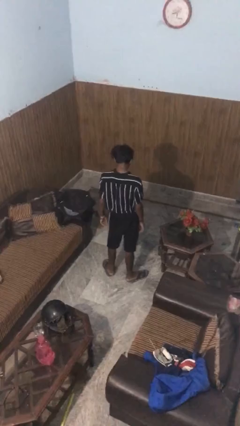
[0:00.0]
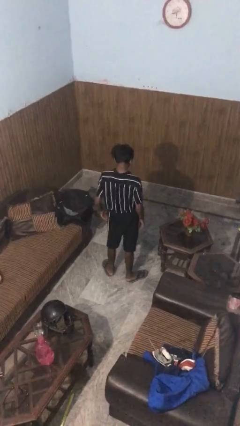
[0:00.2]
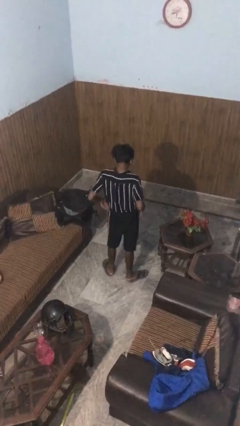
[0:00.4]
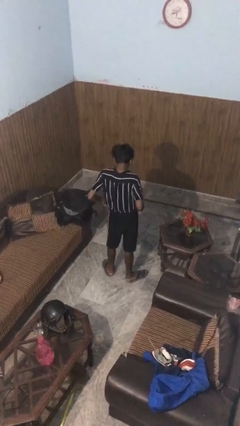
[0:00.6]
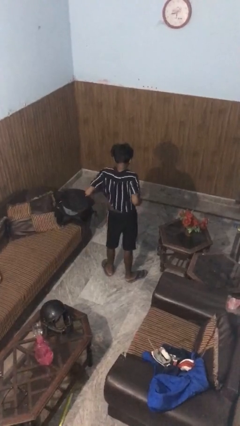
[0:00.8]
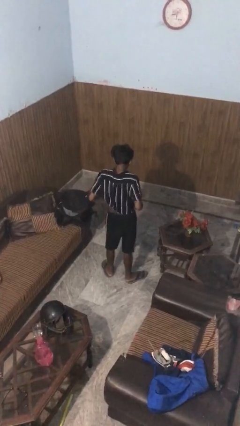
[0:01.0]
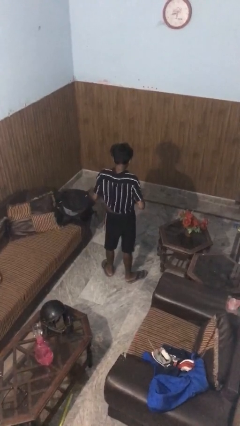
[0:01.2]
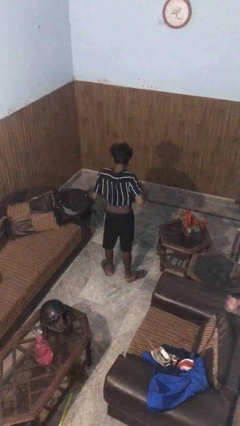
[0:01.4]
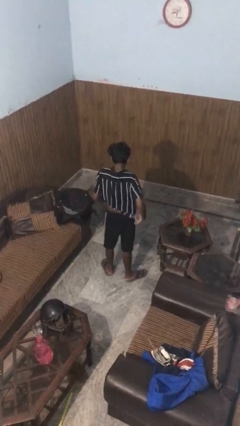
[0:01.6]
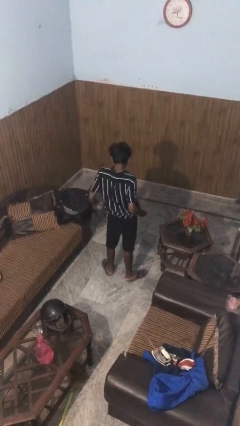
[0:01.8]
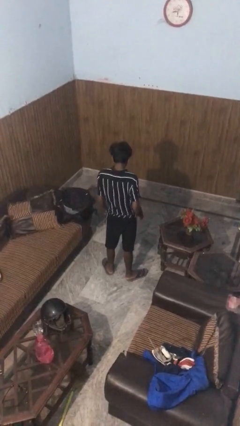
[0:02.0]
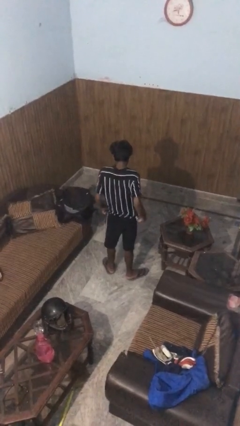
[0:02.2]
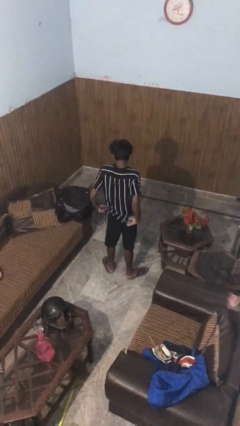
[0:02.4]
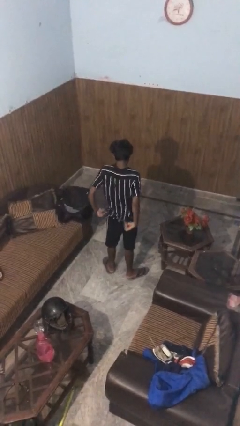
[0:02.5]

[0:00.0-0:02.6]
person untucks shirt

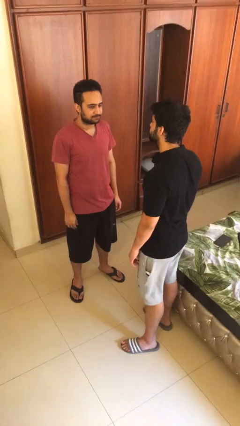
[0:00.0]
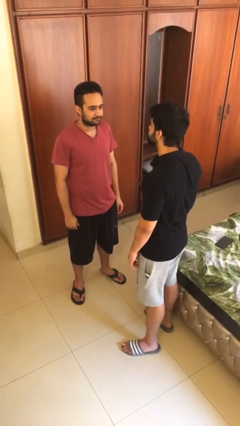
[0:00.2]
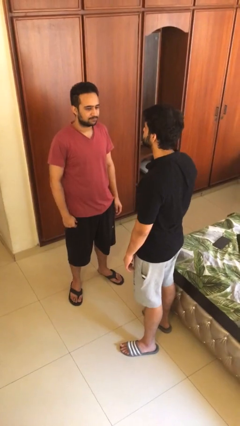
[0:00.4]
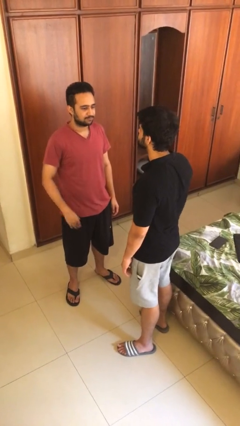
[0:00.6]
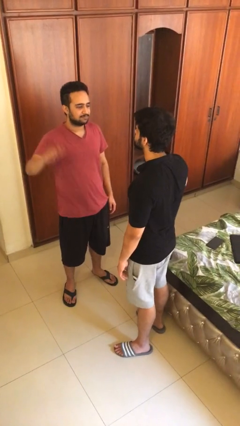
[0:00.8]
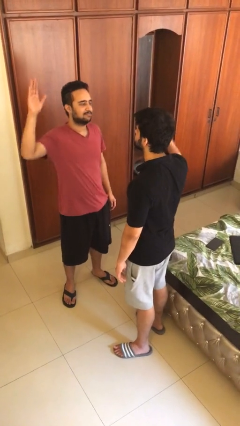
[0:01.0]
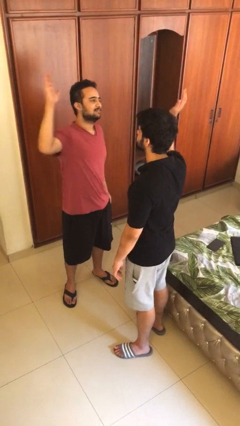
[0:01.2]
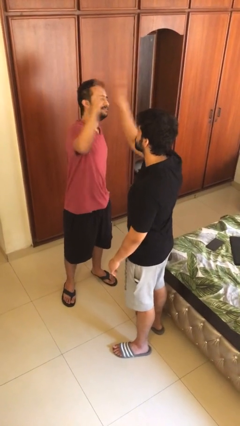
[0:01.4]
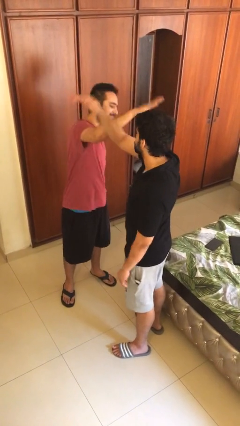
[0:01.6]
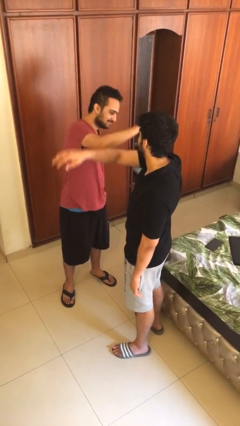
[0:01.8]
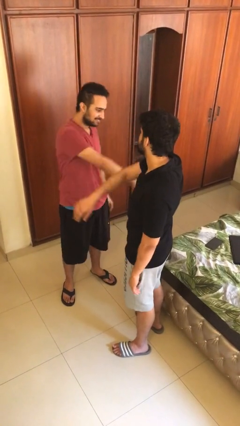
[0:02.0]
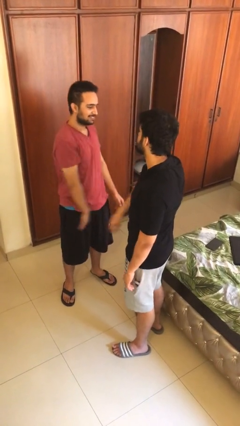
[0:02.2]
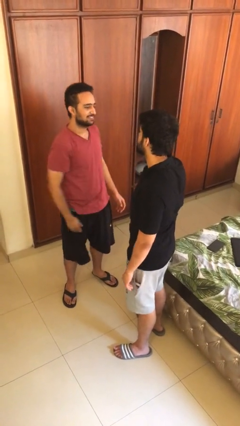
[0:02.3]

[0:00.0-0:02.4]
person highfives hand

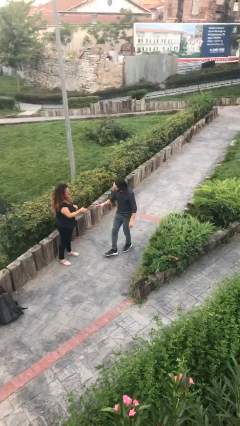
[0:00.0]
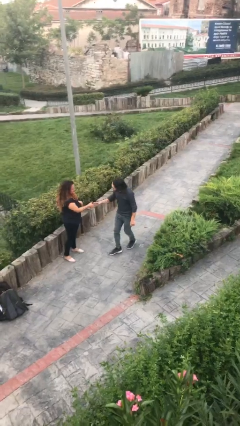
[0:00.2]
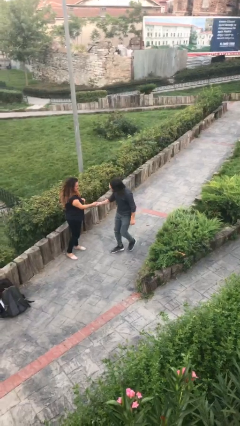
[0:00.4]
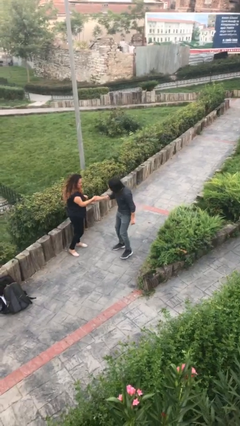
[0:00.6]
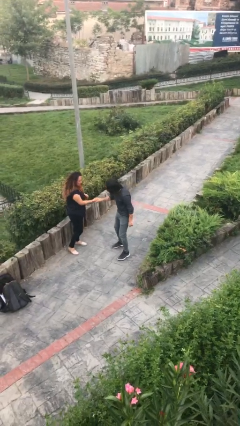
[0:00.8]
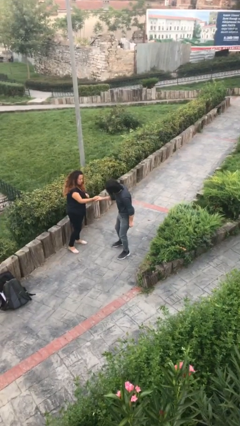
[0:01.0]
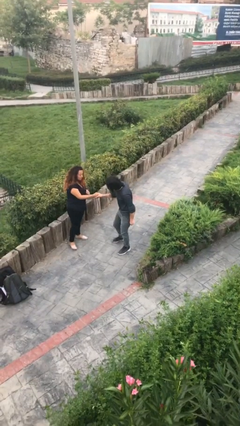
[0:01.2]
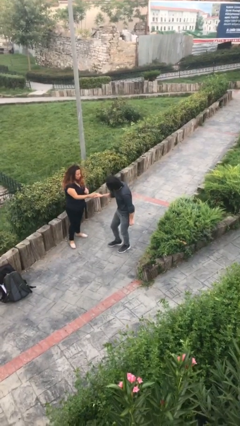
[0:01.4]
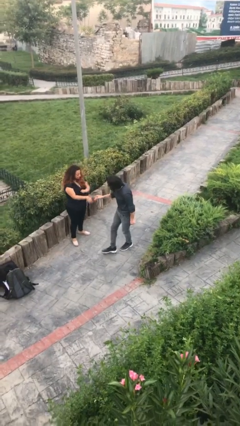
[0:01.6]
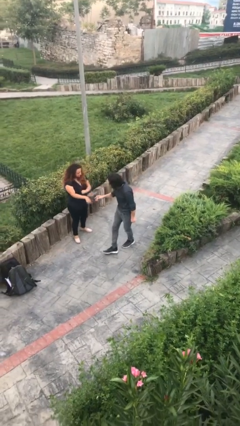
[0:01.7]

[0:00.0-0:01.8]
person shakes hand

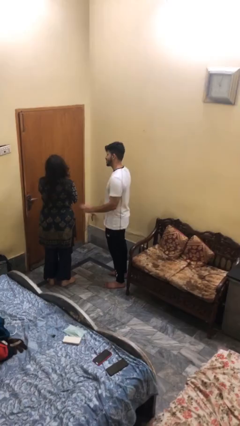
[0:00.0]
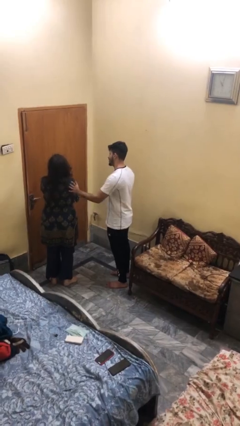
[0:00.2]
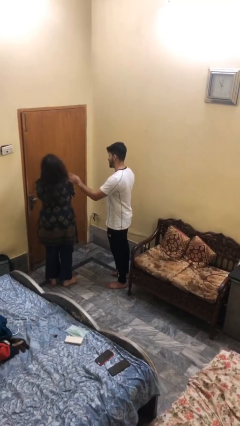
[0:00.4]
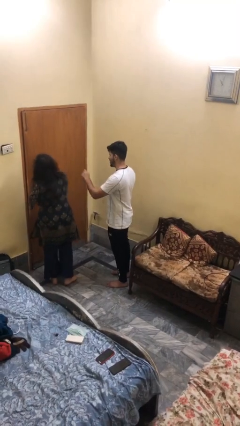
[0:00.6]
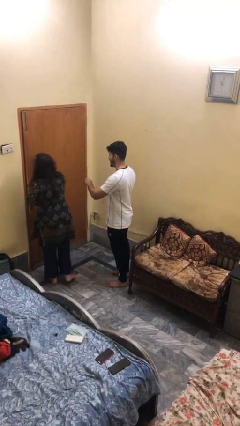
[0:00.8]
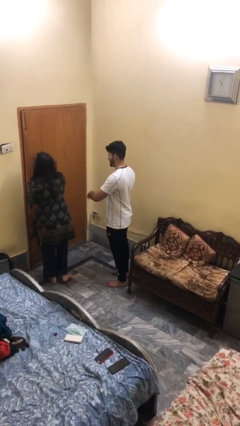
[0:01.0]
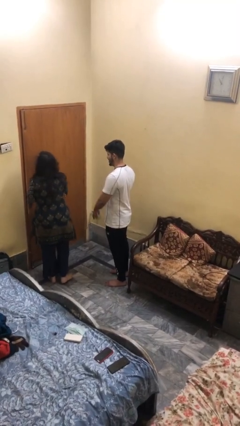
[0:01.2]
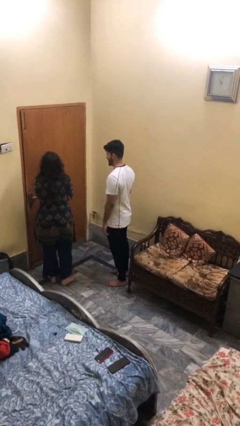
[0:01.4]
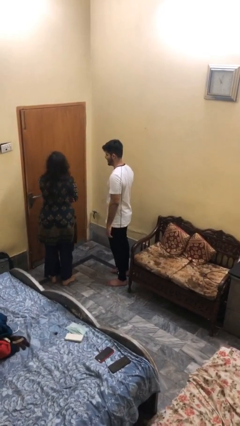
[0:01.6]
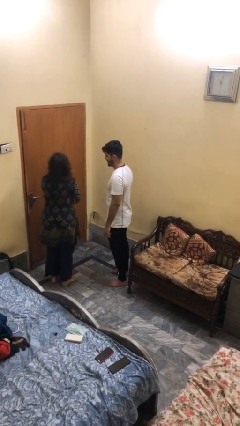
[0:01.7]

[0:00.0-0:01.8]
person shoves person

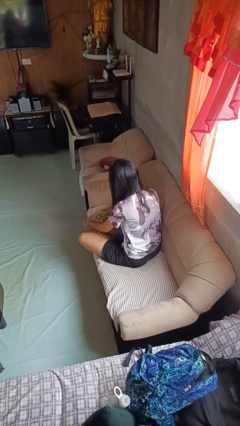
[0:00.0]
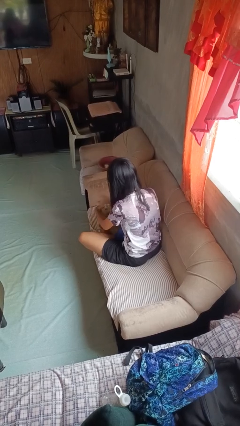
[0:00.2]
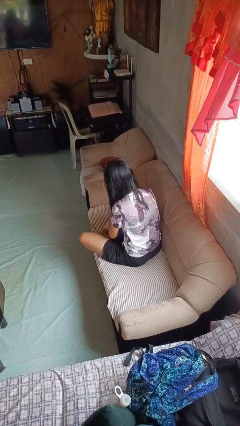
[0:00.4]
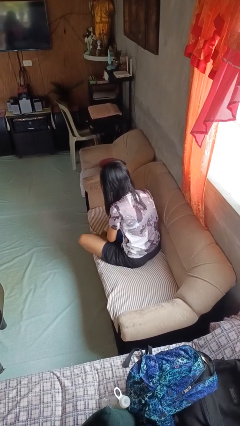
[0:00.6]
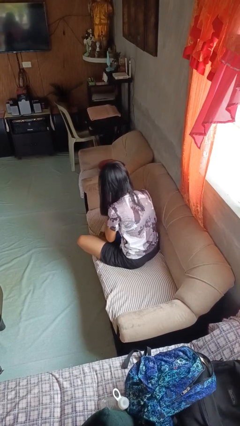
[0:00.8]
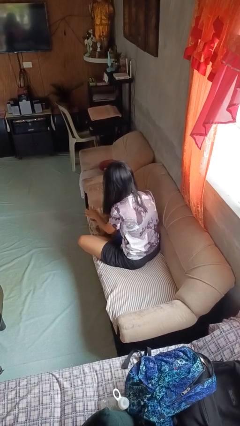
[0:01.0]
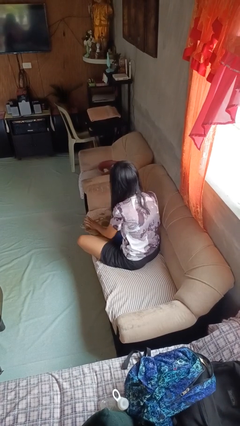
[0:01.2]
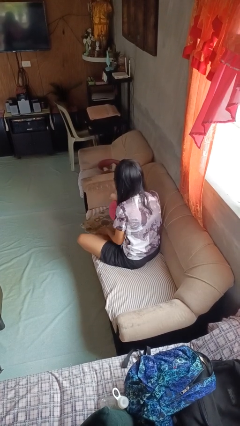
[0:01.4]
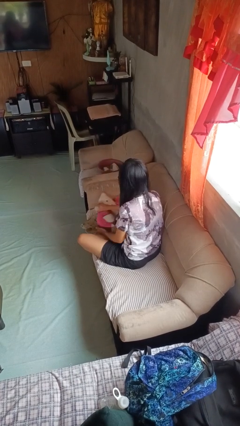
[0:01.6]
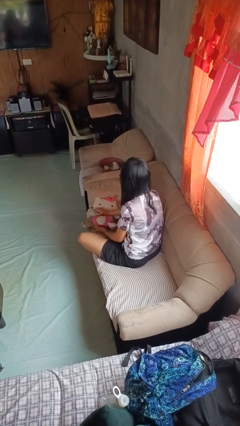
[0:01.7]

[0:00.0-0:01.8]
person searches in couch

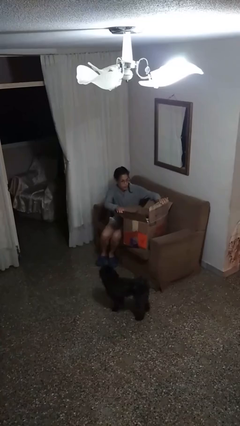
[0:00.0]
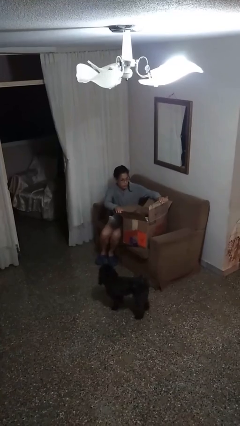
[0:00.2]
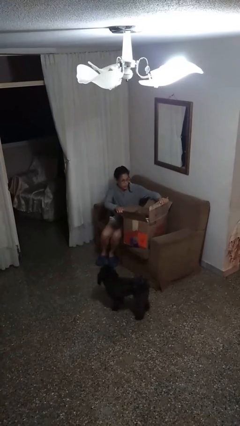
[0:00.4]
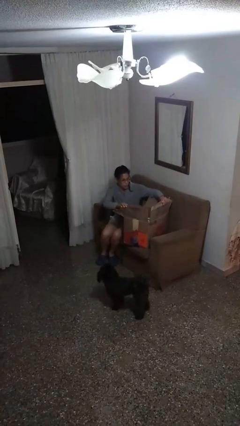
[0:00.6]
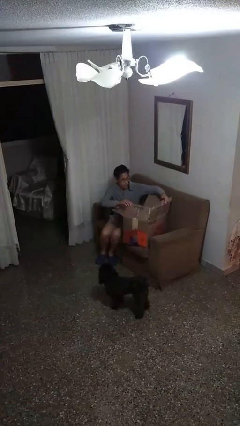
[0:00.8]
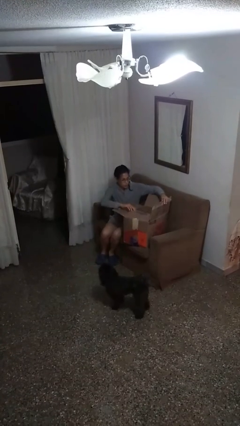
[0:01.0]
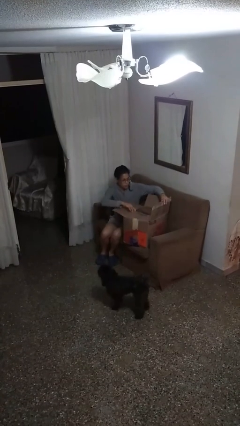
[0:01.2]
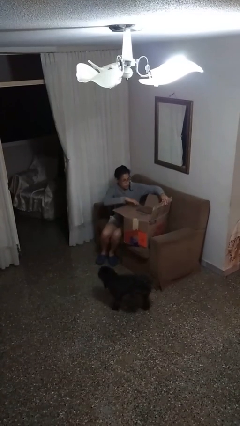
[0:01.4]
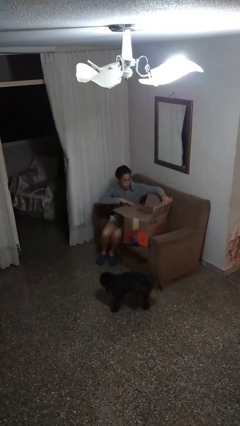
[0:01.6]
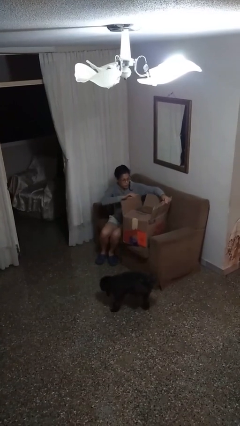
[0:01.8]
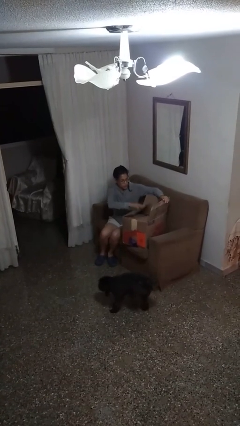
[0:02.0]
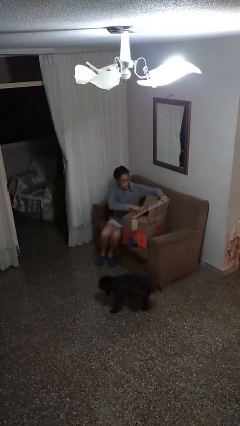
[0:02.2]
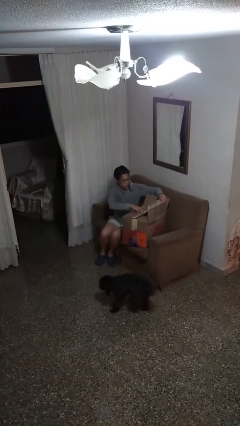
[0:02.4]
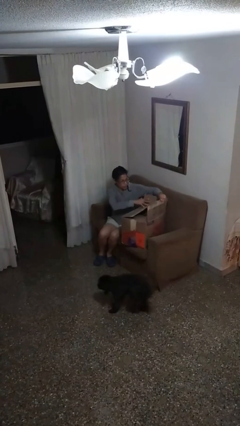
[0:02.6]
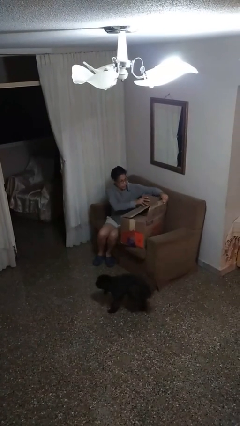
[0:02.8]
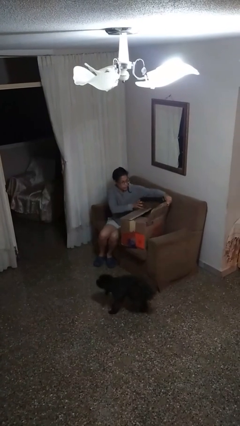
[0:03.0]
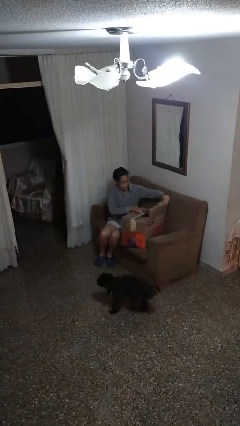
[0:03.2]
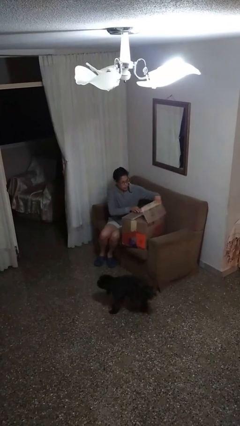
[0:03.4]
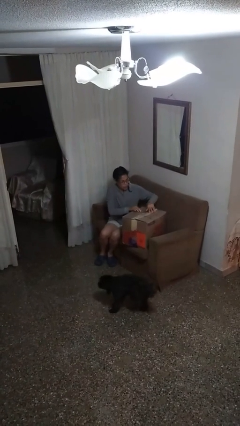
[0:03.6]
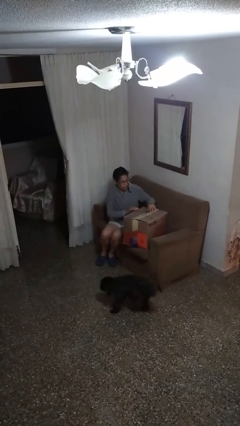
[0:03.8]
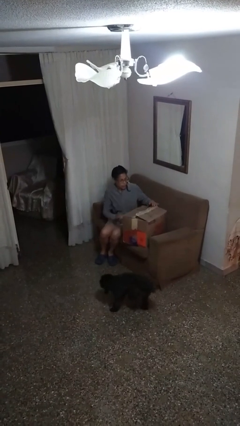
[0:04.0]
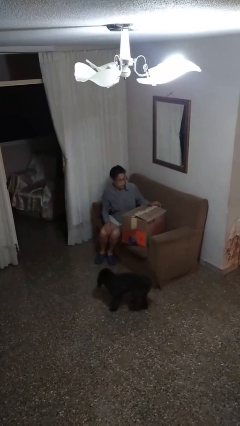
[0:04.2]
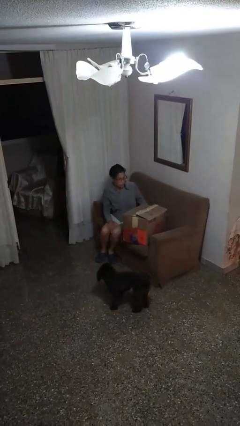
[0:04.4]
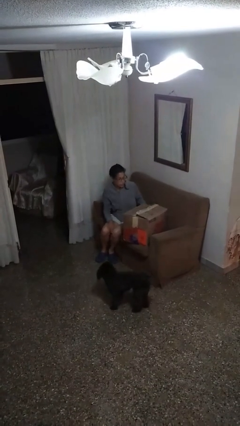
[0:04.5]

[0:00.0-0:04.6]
person closes box

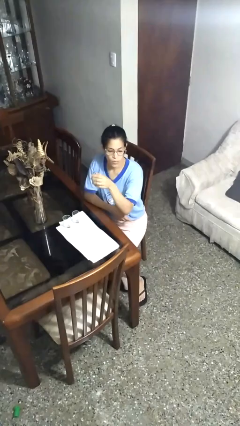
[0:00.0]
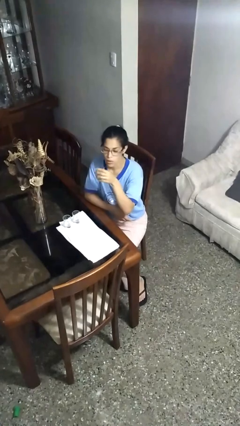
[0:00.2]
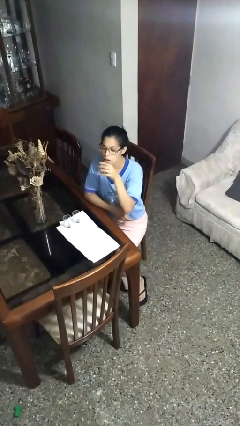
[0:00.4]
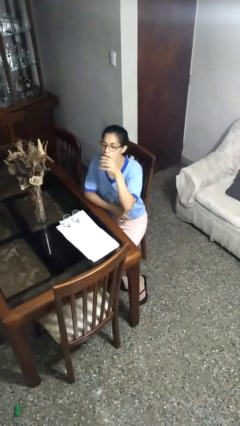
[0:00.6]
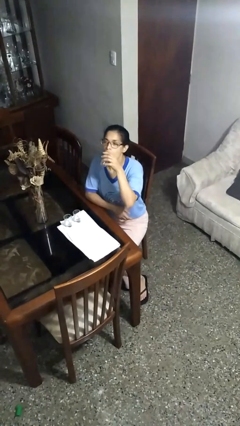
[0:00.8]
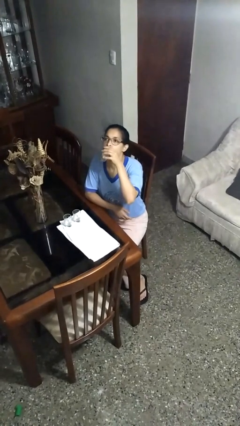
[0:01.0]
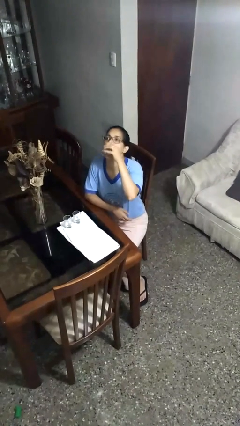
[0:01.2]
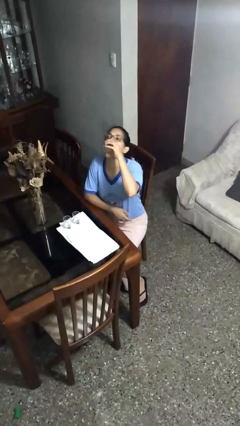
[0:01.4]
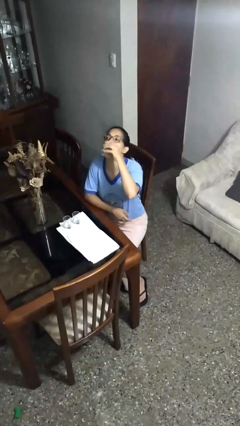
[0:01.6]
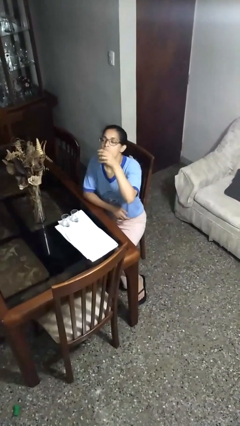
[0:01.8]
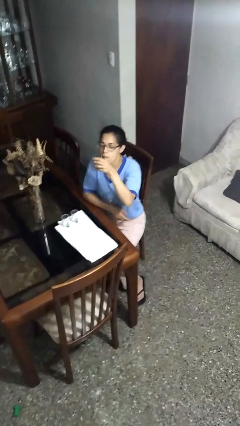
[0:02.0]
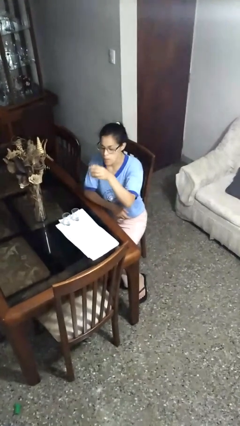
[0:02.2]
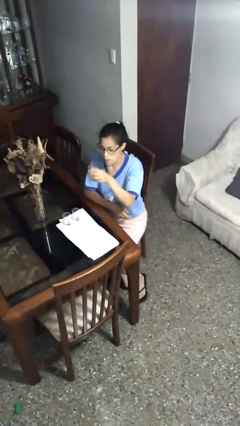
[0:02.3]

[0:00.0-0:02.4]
person drinks from shotglass
